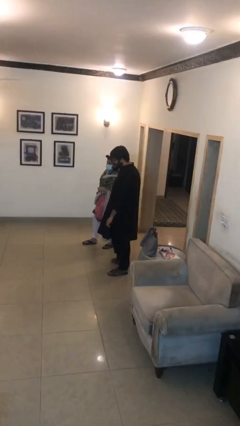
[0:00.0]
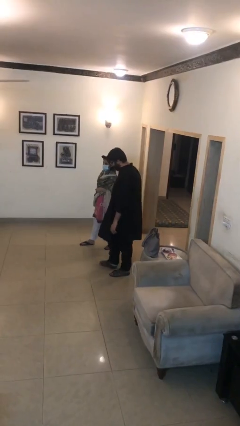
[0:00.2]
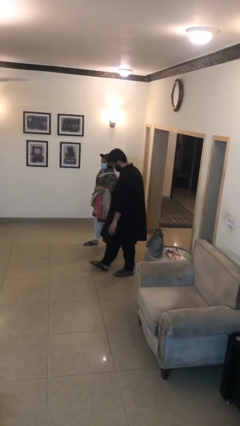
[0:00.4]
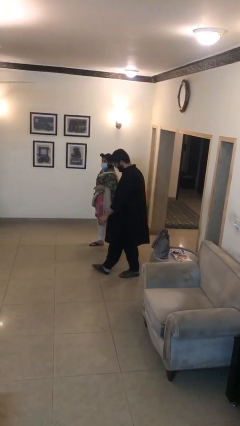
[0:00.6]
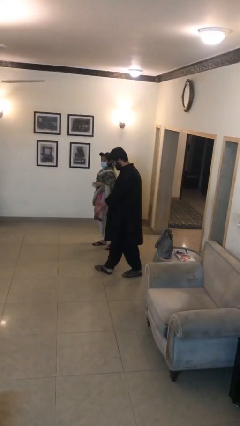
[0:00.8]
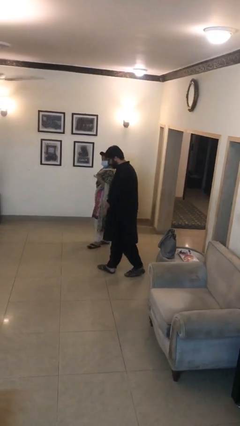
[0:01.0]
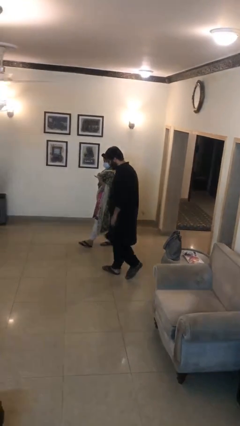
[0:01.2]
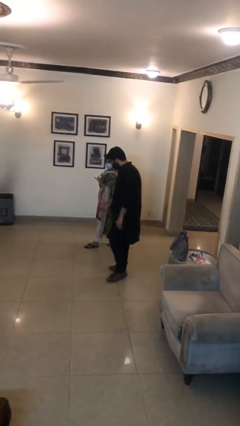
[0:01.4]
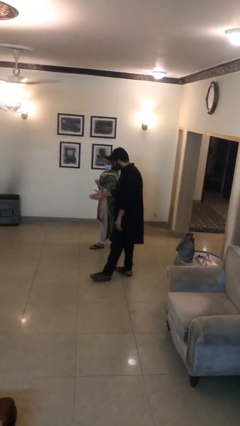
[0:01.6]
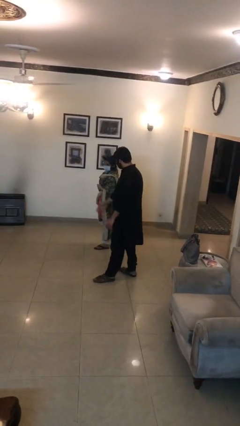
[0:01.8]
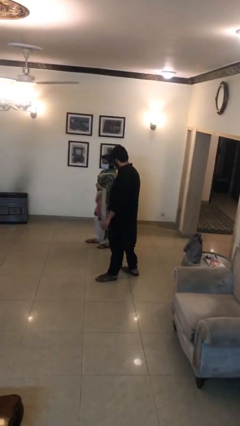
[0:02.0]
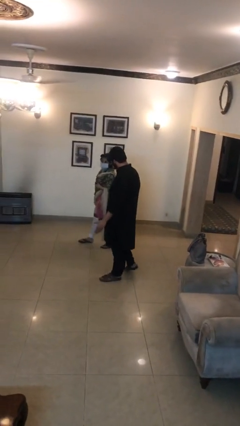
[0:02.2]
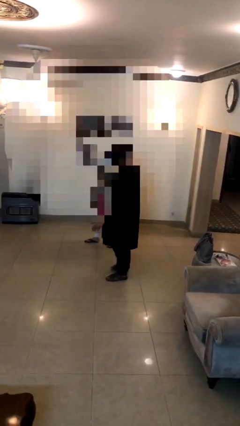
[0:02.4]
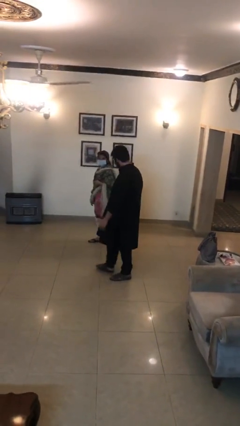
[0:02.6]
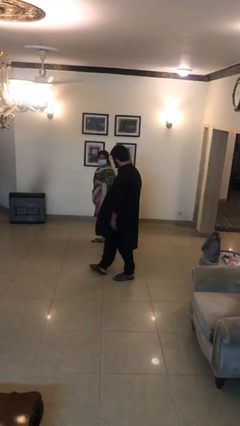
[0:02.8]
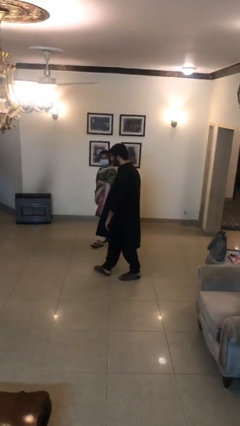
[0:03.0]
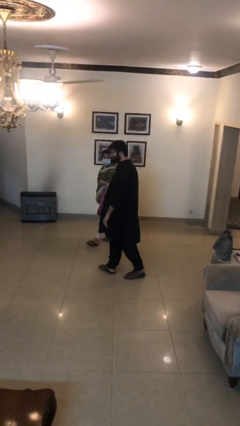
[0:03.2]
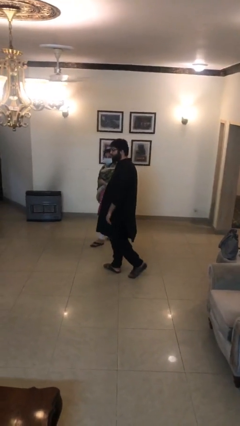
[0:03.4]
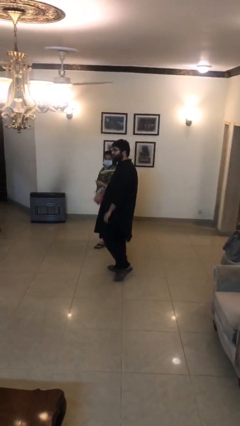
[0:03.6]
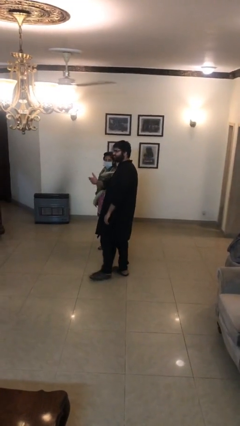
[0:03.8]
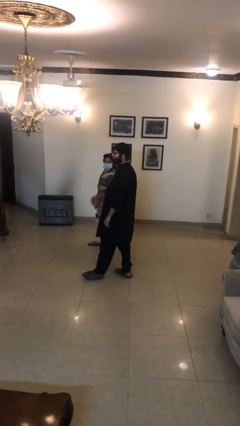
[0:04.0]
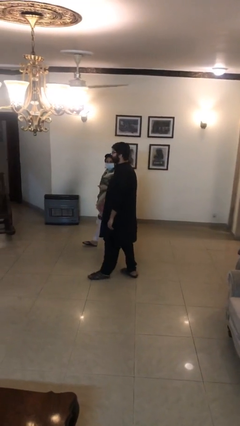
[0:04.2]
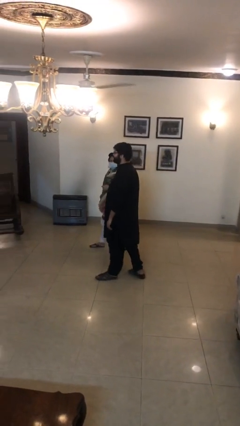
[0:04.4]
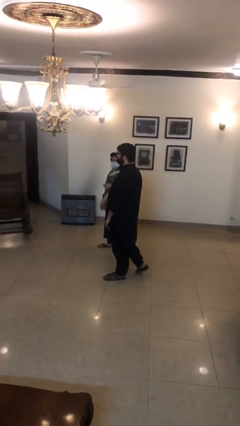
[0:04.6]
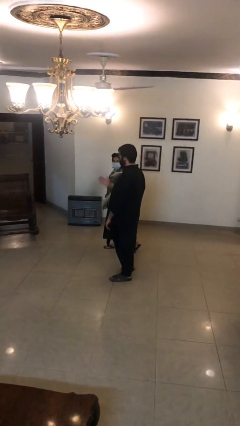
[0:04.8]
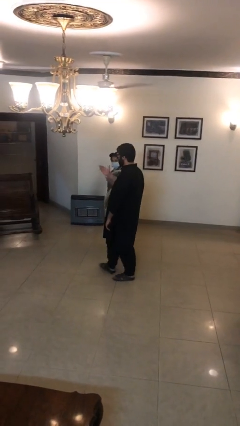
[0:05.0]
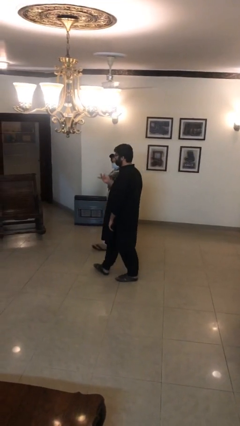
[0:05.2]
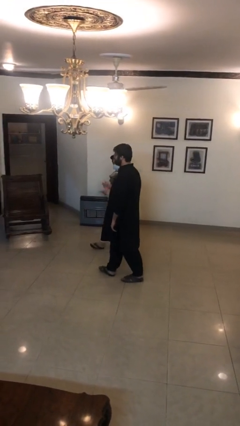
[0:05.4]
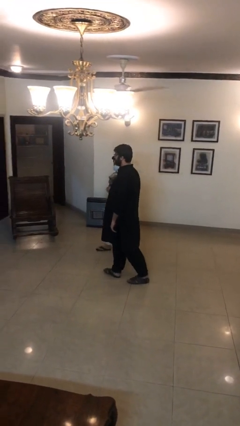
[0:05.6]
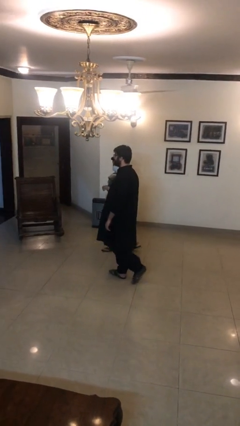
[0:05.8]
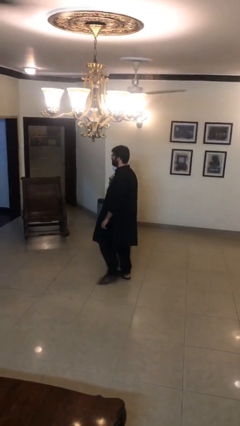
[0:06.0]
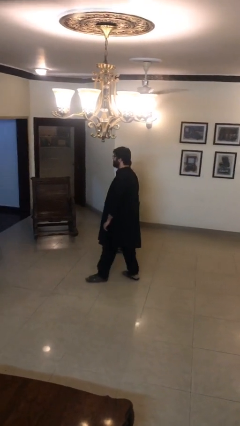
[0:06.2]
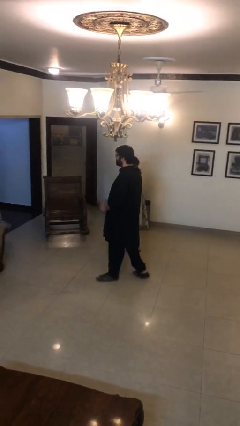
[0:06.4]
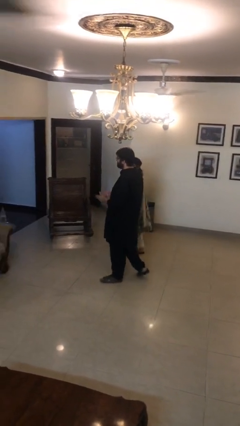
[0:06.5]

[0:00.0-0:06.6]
person talks to person

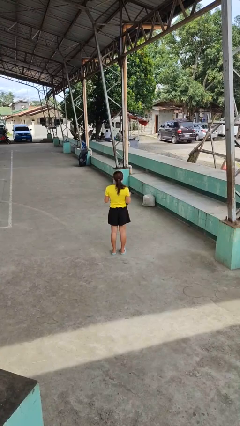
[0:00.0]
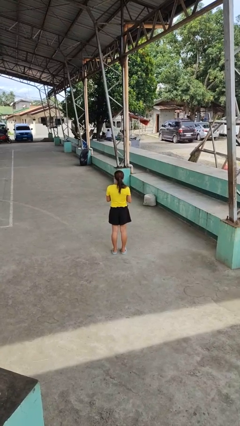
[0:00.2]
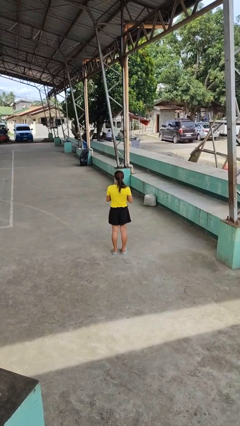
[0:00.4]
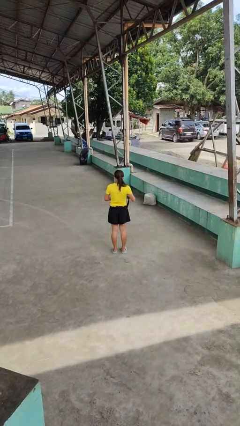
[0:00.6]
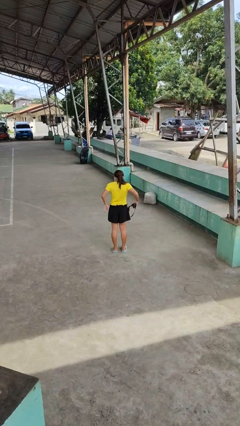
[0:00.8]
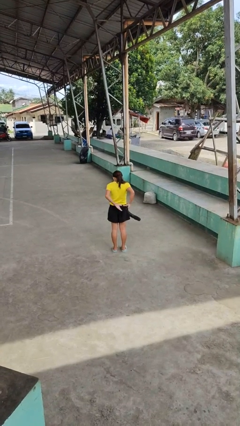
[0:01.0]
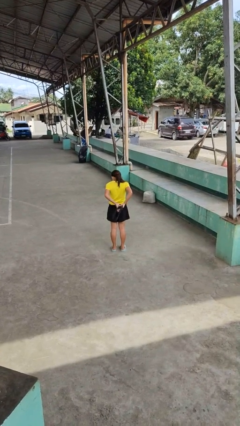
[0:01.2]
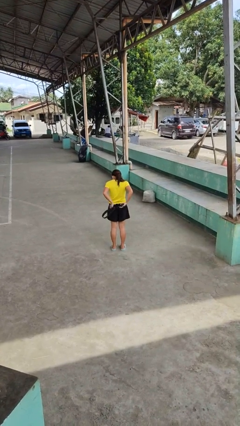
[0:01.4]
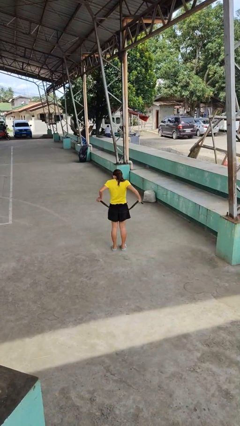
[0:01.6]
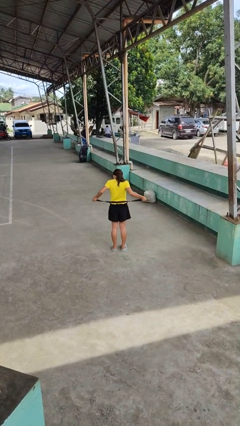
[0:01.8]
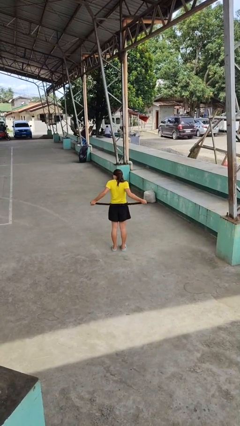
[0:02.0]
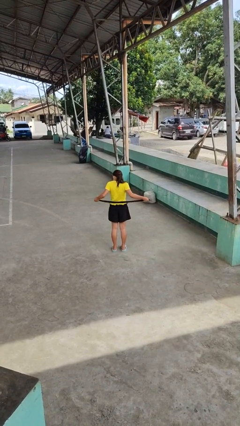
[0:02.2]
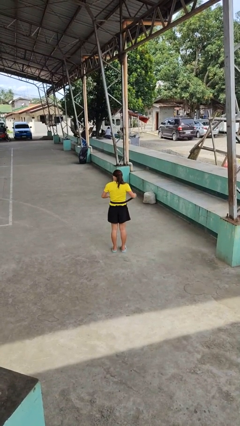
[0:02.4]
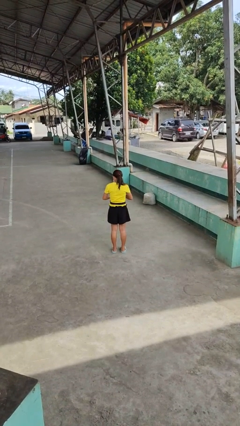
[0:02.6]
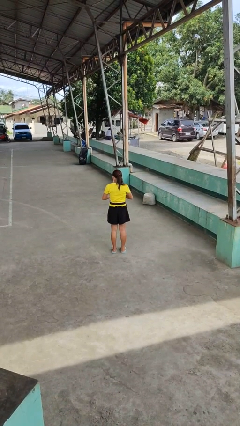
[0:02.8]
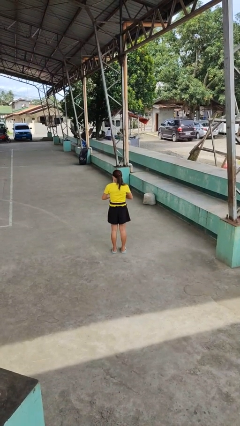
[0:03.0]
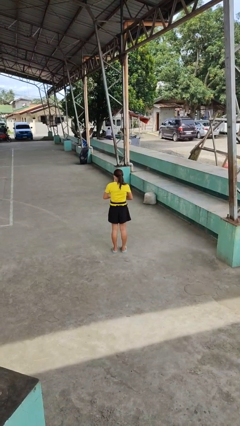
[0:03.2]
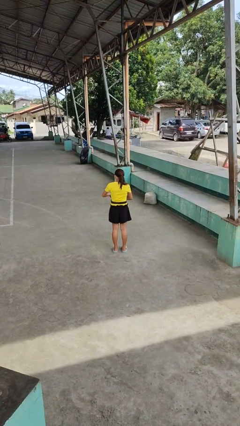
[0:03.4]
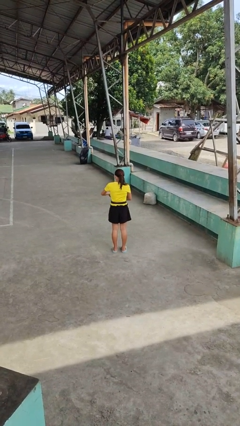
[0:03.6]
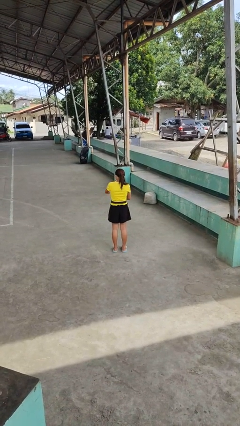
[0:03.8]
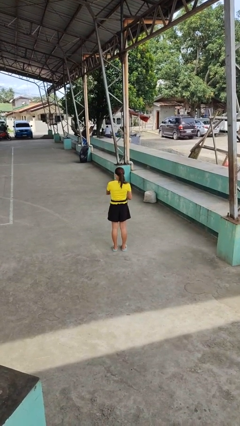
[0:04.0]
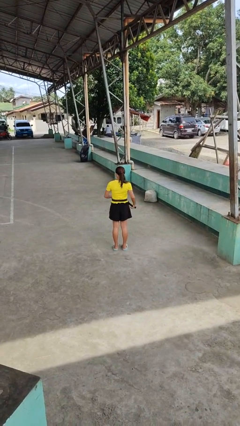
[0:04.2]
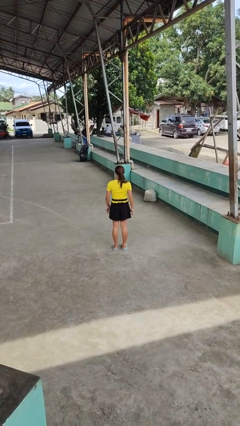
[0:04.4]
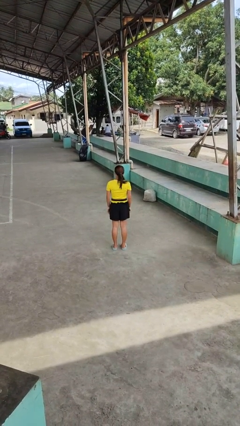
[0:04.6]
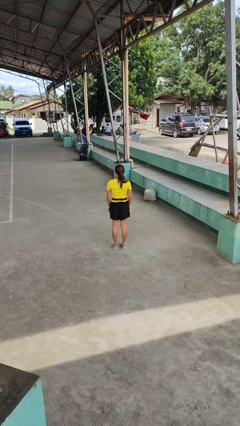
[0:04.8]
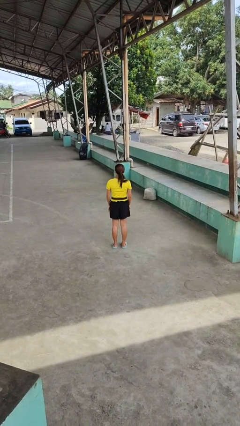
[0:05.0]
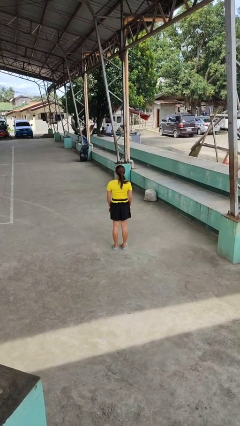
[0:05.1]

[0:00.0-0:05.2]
person puts on belt

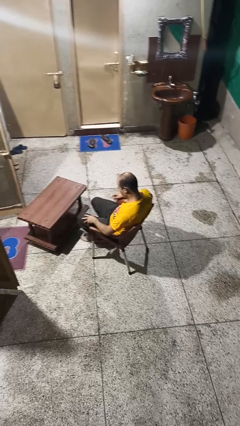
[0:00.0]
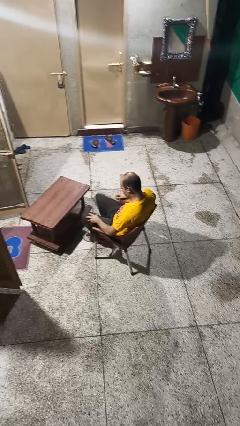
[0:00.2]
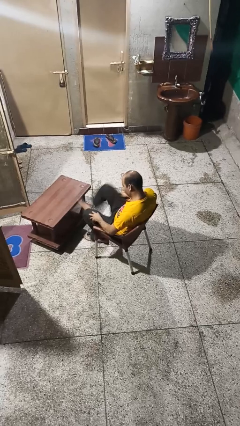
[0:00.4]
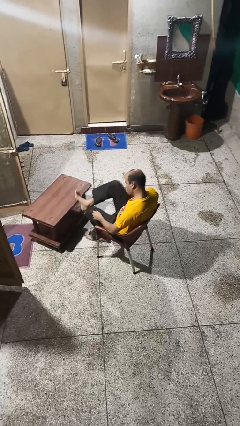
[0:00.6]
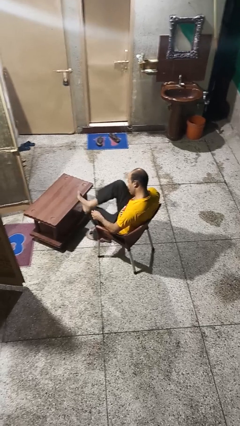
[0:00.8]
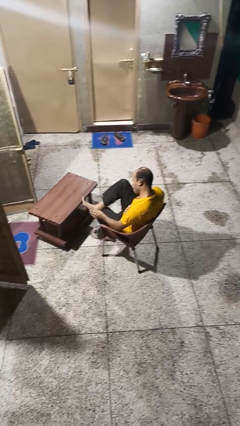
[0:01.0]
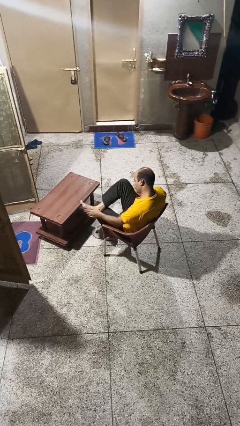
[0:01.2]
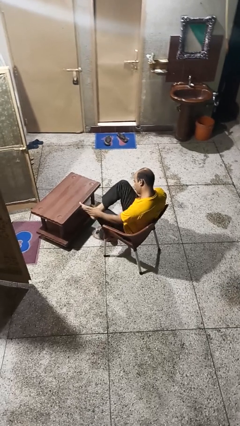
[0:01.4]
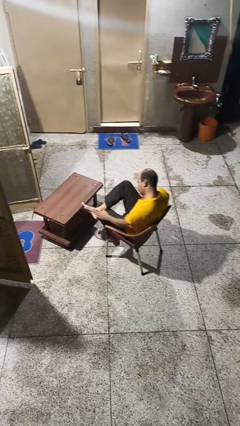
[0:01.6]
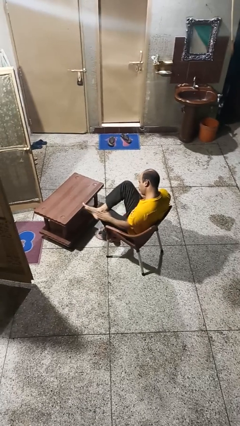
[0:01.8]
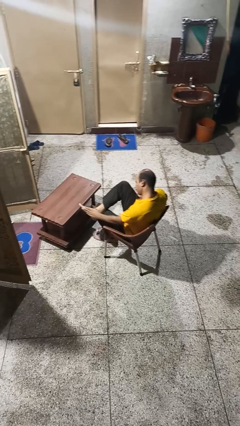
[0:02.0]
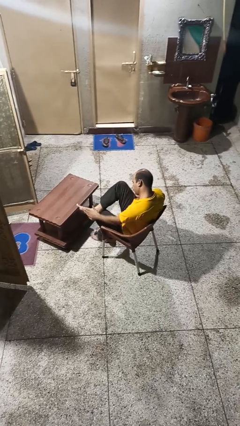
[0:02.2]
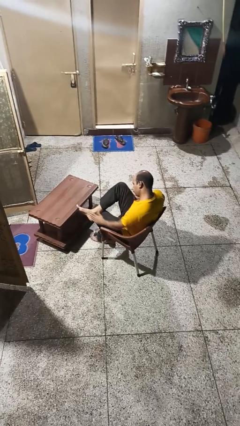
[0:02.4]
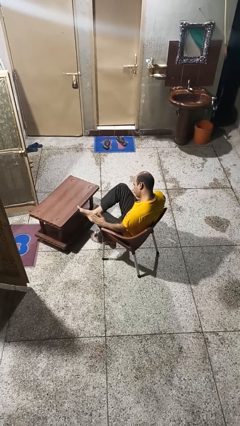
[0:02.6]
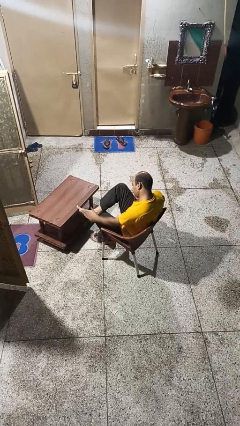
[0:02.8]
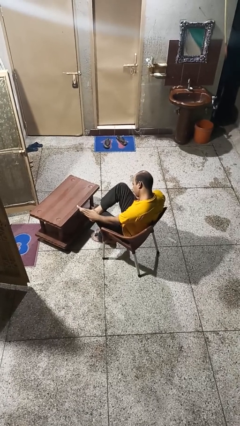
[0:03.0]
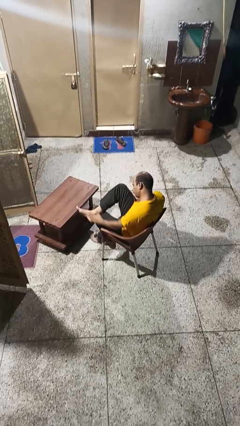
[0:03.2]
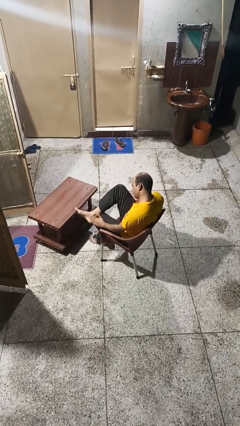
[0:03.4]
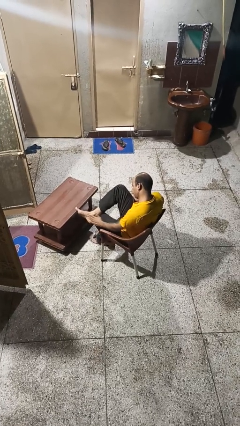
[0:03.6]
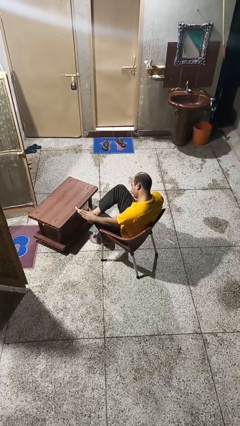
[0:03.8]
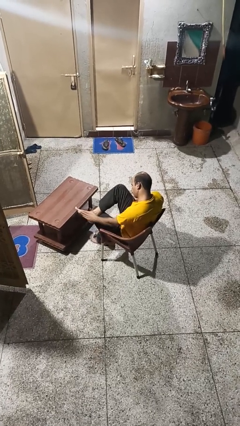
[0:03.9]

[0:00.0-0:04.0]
person rubs foot

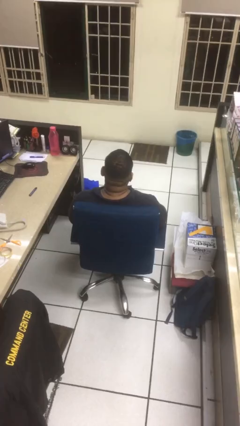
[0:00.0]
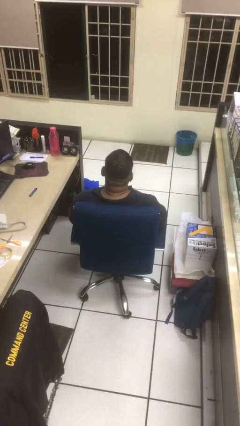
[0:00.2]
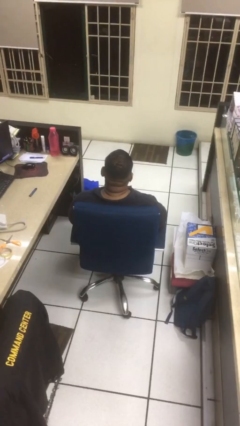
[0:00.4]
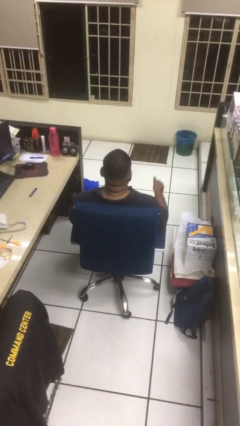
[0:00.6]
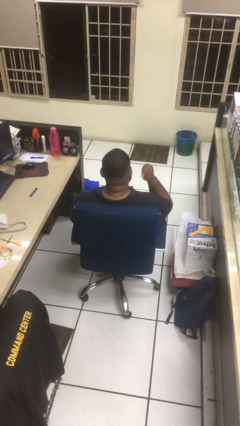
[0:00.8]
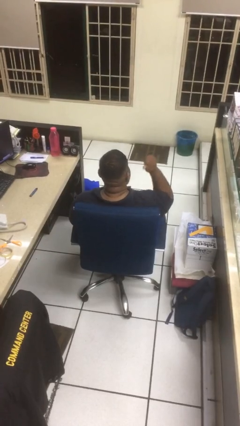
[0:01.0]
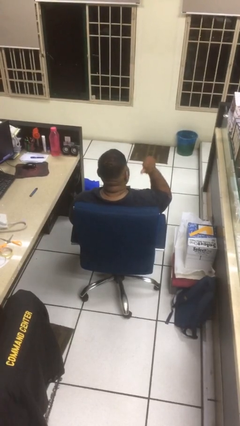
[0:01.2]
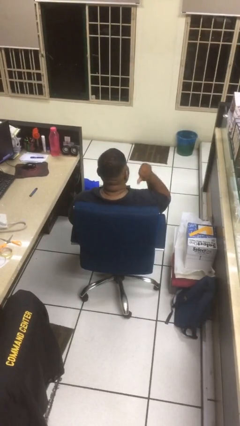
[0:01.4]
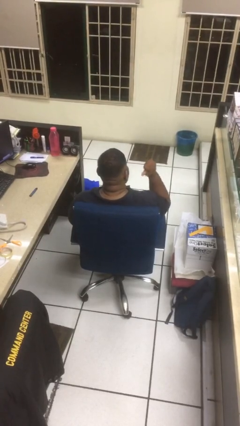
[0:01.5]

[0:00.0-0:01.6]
person gestures behind me
